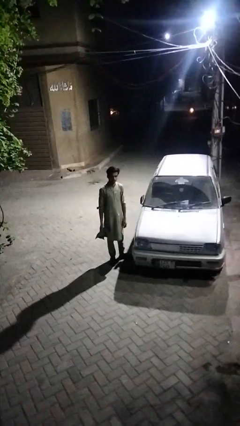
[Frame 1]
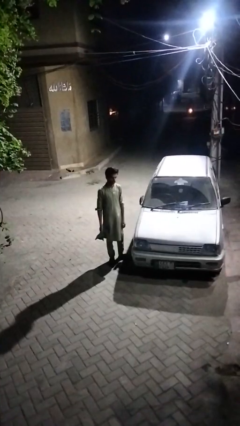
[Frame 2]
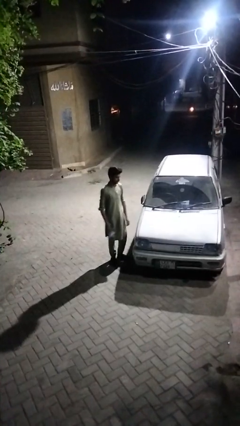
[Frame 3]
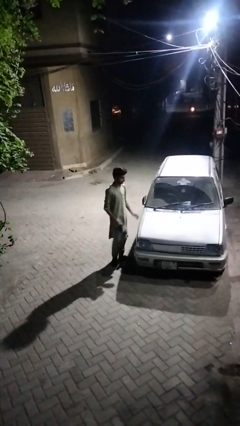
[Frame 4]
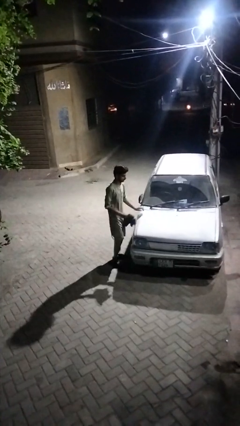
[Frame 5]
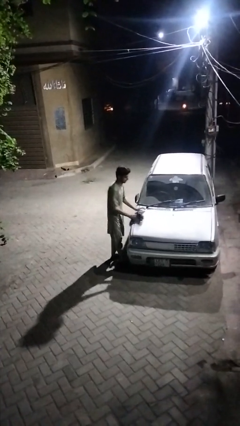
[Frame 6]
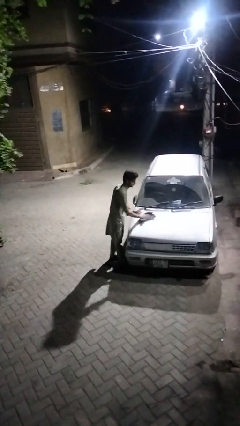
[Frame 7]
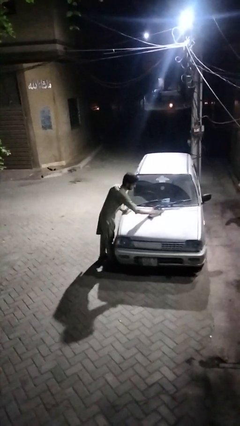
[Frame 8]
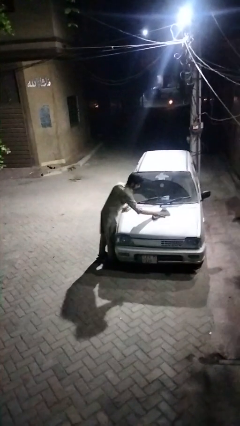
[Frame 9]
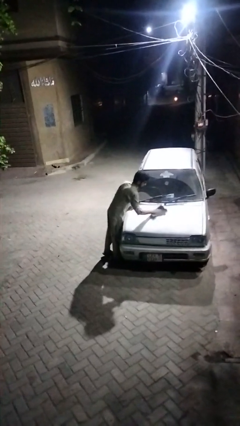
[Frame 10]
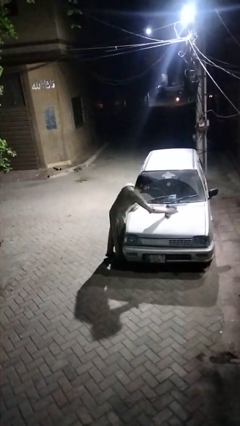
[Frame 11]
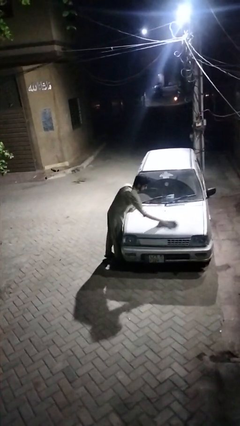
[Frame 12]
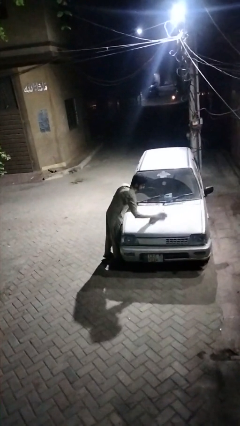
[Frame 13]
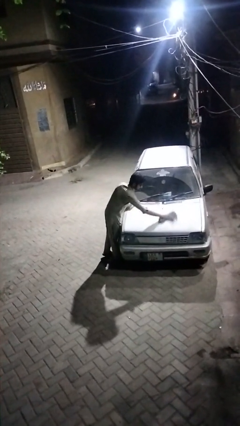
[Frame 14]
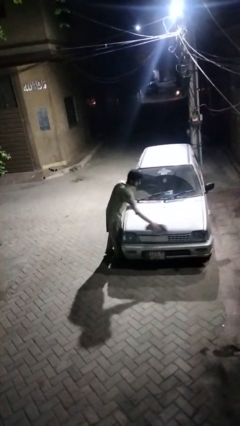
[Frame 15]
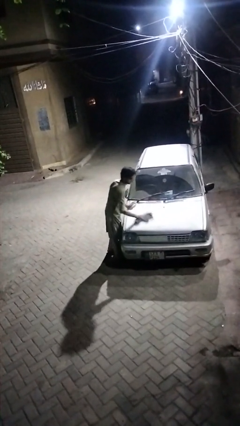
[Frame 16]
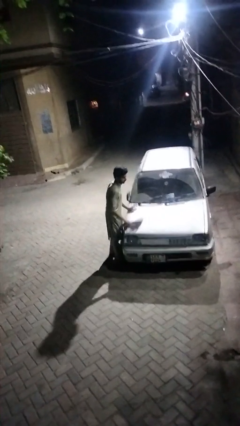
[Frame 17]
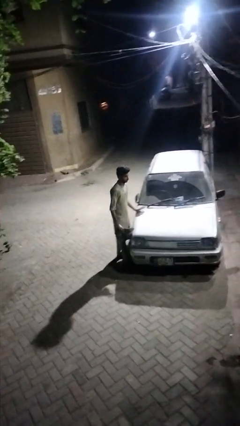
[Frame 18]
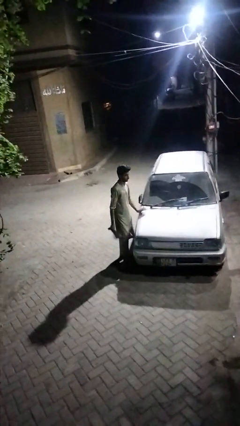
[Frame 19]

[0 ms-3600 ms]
person polishes car with rag

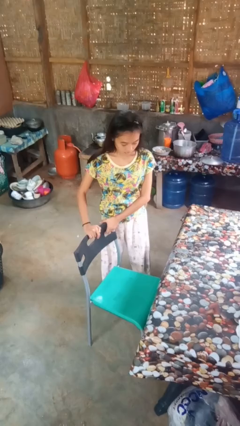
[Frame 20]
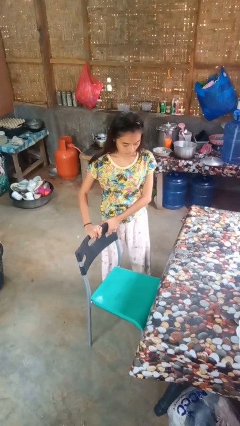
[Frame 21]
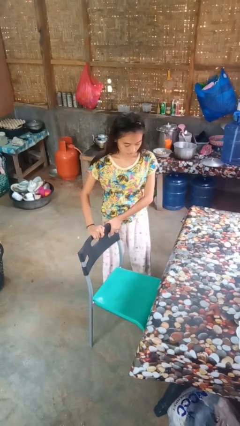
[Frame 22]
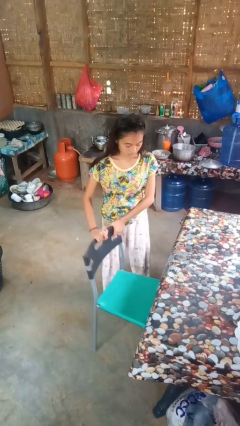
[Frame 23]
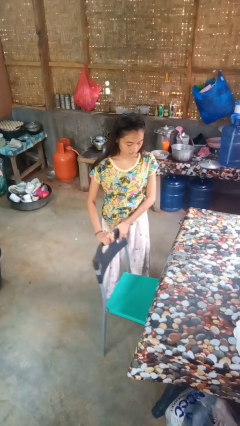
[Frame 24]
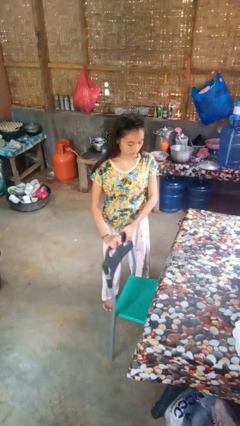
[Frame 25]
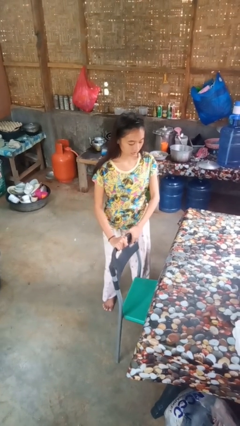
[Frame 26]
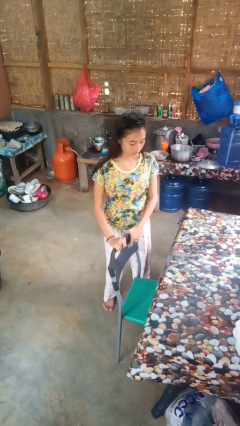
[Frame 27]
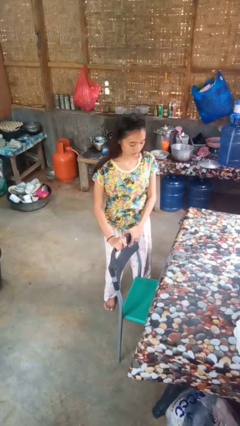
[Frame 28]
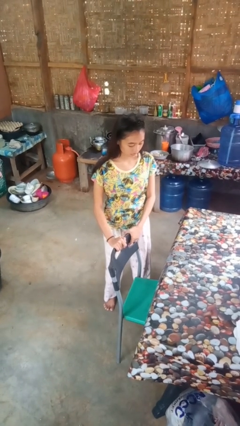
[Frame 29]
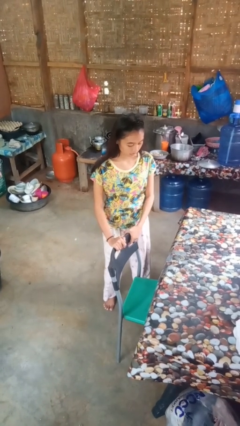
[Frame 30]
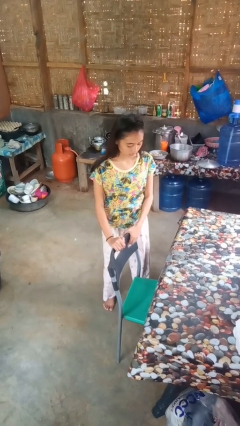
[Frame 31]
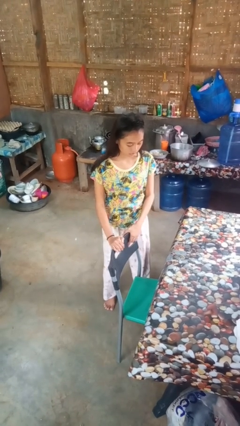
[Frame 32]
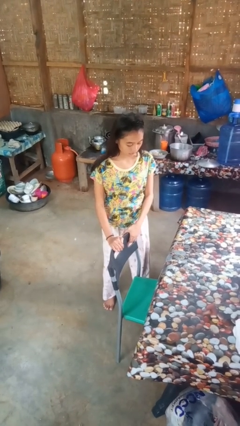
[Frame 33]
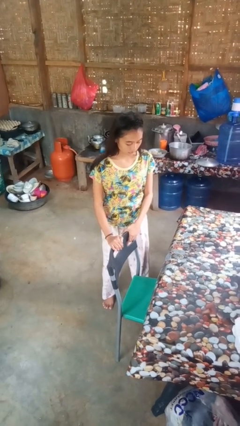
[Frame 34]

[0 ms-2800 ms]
person pushes in chair

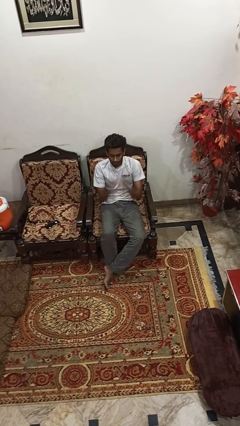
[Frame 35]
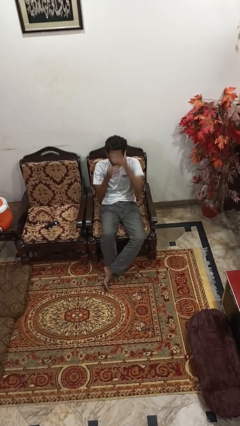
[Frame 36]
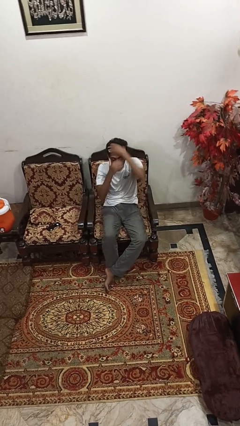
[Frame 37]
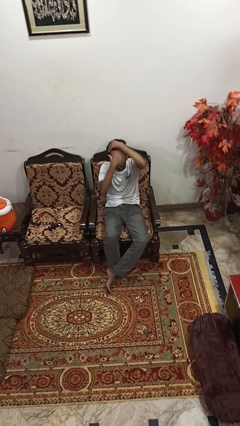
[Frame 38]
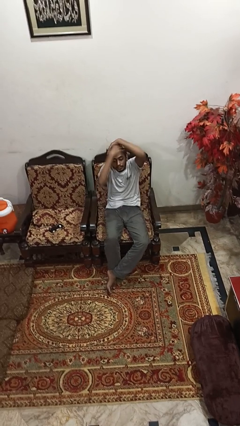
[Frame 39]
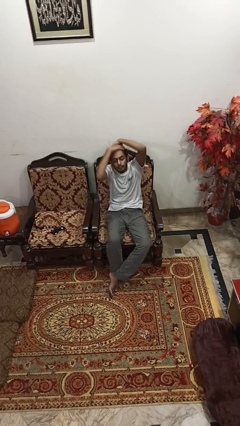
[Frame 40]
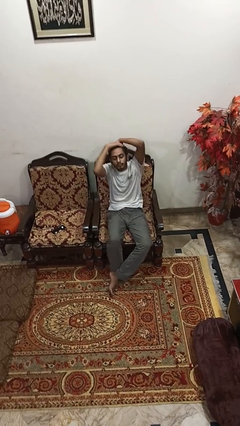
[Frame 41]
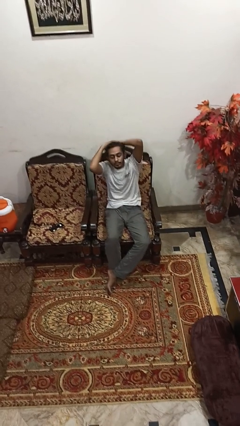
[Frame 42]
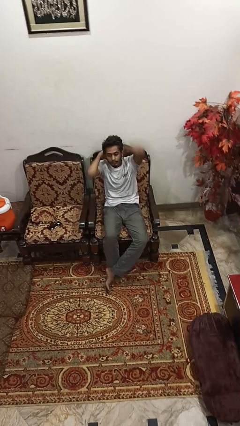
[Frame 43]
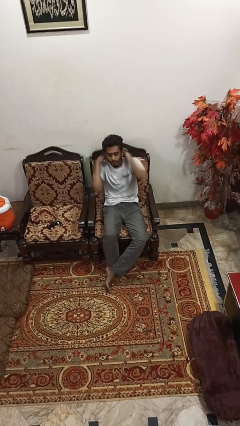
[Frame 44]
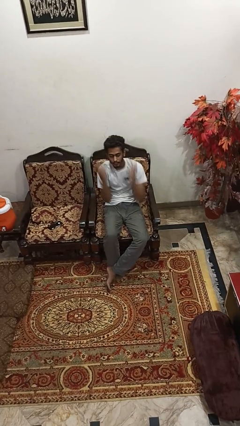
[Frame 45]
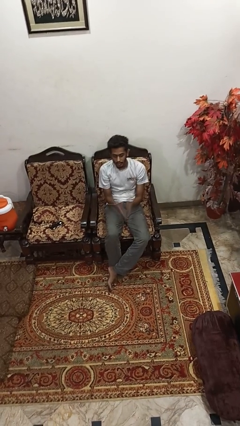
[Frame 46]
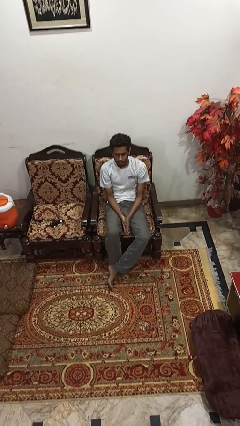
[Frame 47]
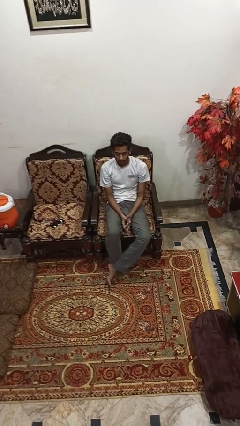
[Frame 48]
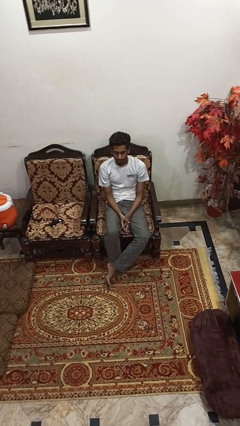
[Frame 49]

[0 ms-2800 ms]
person strokes hair

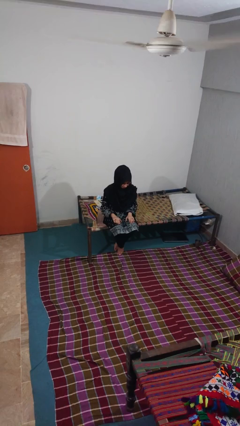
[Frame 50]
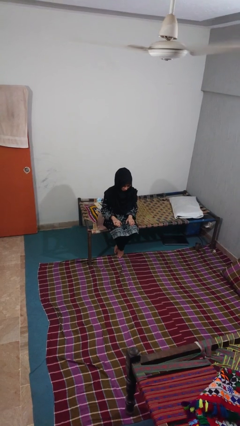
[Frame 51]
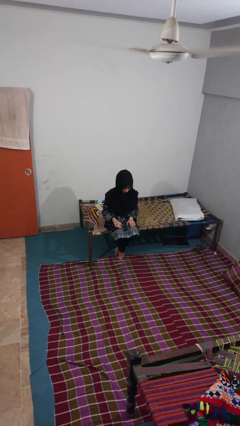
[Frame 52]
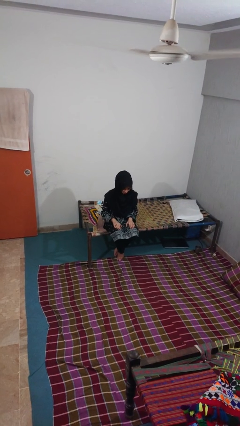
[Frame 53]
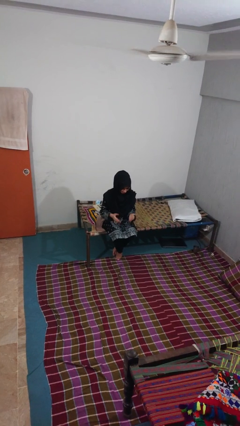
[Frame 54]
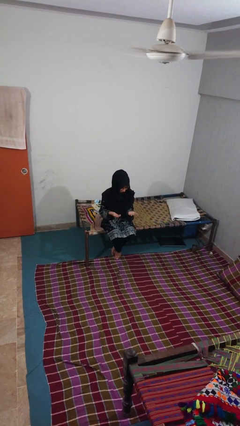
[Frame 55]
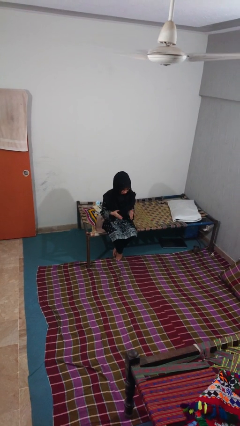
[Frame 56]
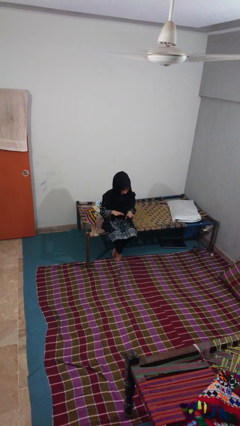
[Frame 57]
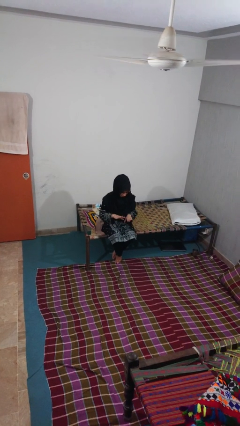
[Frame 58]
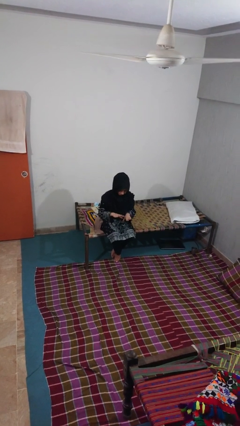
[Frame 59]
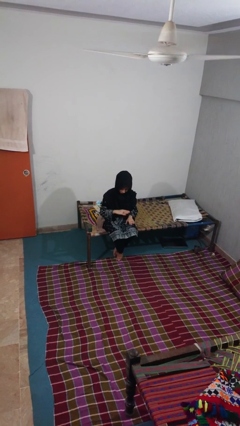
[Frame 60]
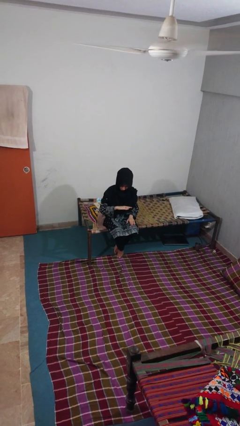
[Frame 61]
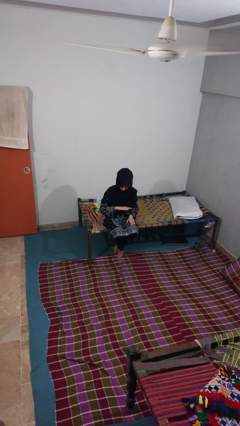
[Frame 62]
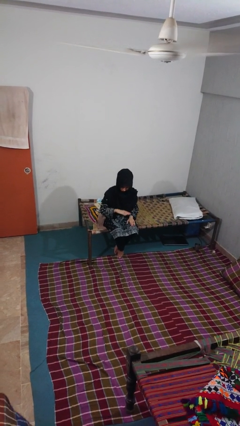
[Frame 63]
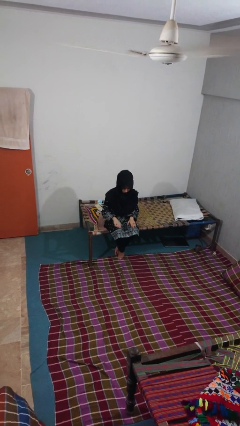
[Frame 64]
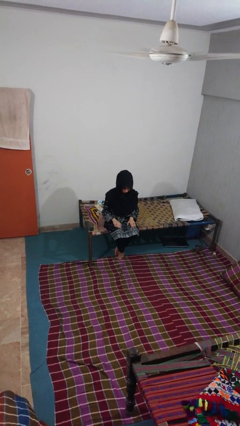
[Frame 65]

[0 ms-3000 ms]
person looks at hands in lap

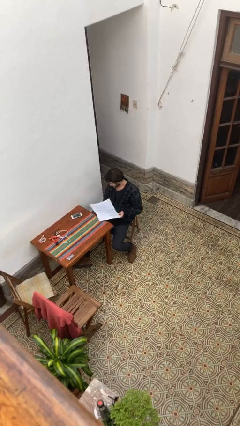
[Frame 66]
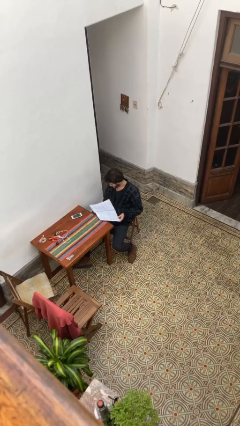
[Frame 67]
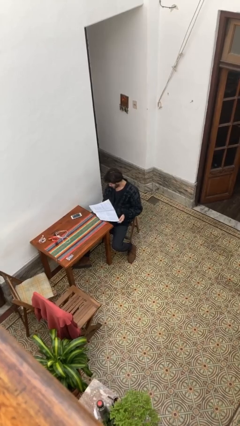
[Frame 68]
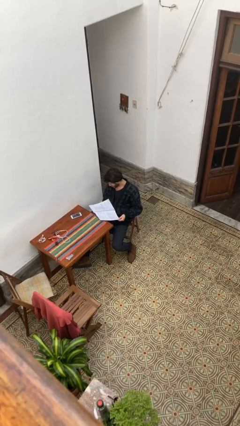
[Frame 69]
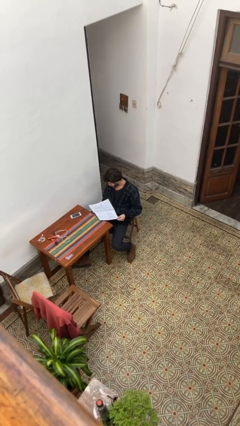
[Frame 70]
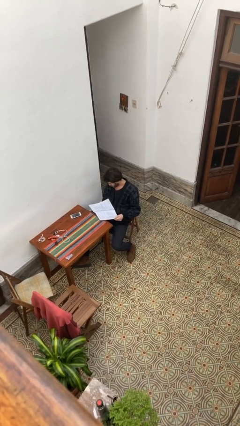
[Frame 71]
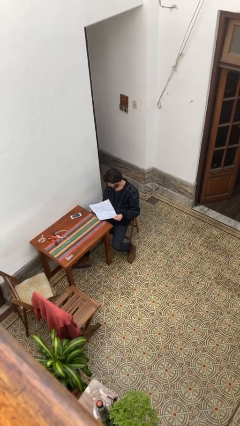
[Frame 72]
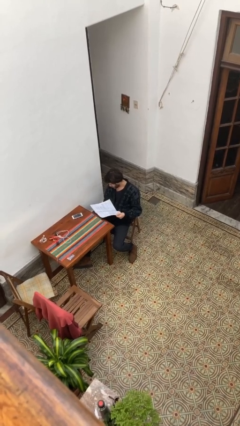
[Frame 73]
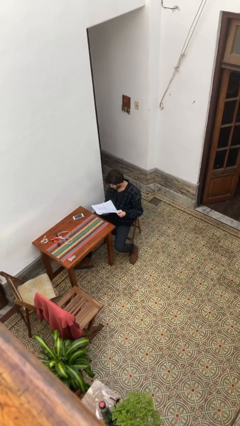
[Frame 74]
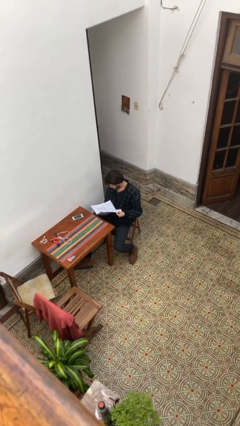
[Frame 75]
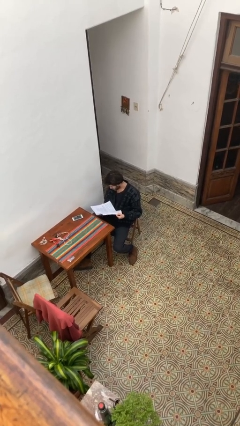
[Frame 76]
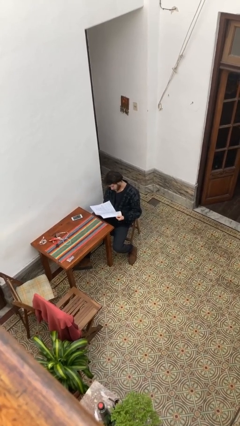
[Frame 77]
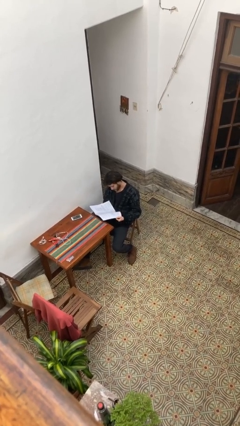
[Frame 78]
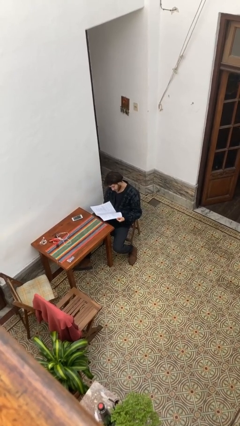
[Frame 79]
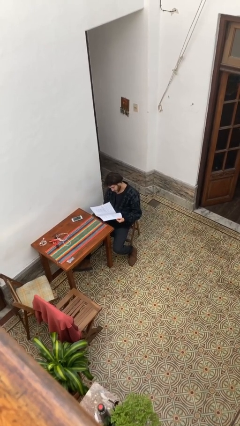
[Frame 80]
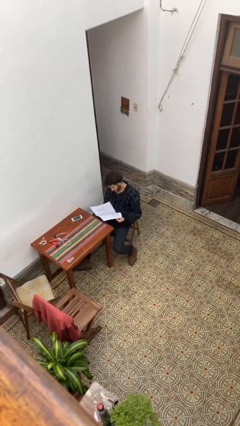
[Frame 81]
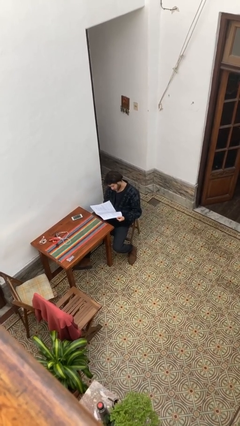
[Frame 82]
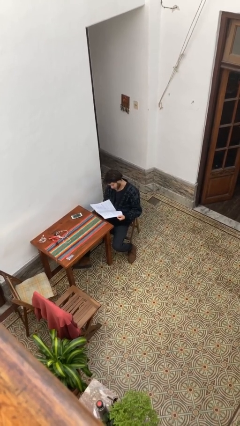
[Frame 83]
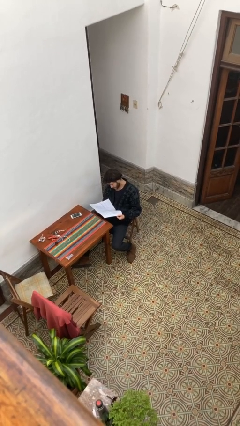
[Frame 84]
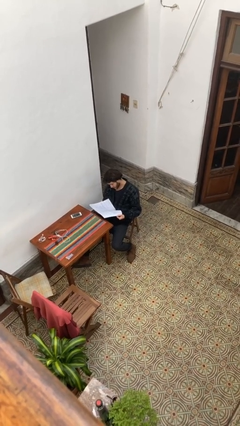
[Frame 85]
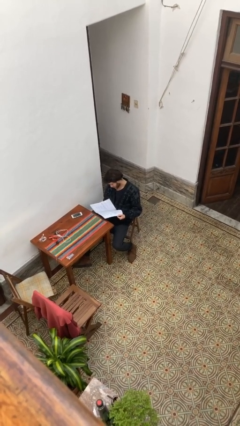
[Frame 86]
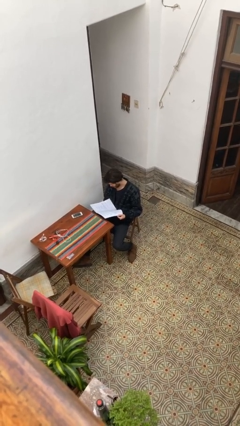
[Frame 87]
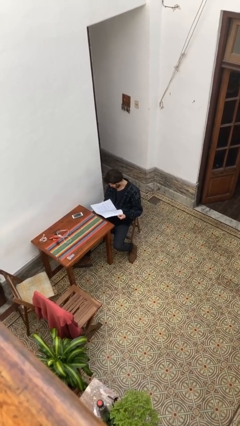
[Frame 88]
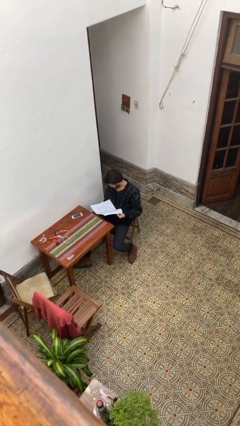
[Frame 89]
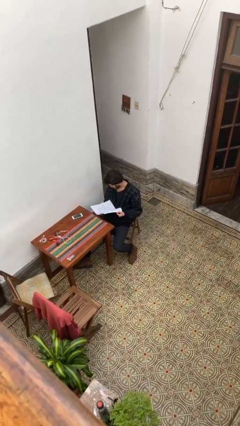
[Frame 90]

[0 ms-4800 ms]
person reads document

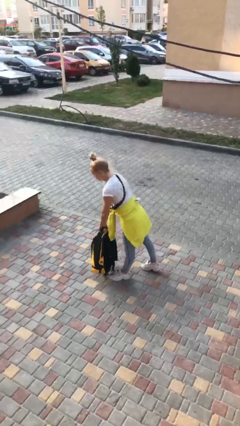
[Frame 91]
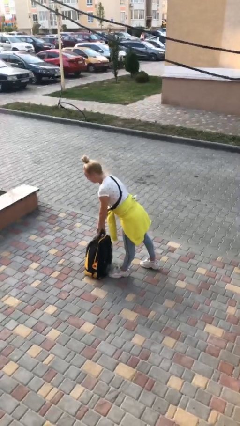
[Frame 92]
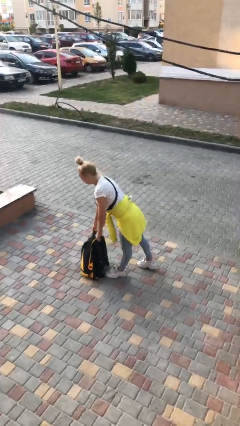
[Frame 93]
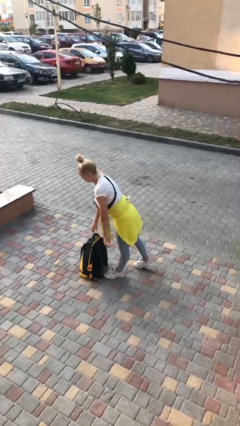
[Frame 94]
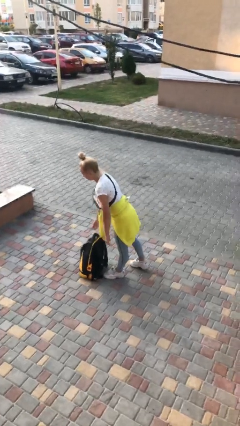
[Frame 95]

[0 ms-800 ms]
person puts down object on floor
